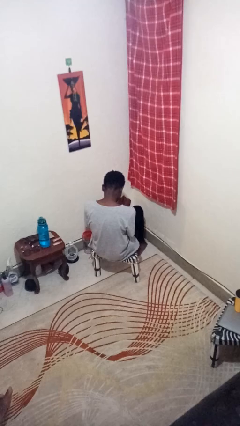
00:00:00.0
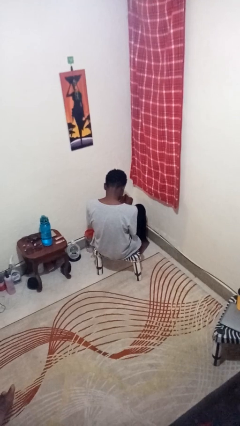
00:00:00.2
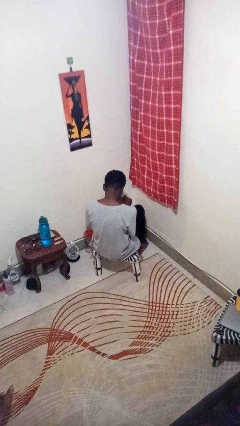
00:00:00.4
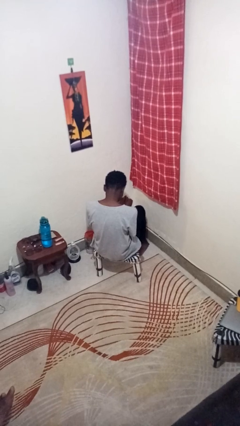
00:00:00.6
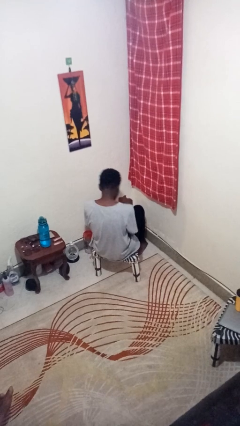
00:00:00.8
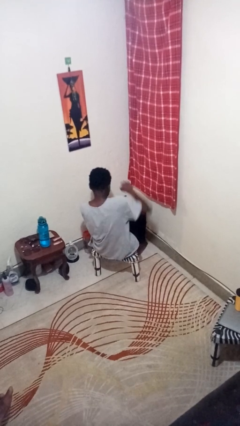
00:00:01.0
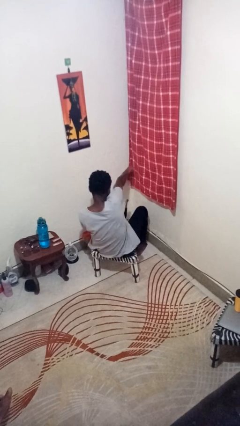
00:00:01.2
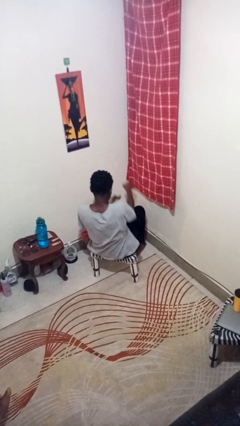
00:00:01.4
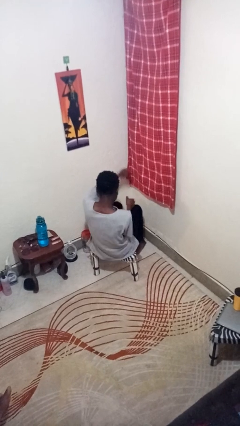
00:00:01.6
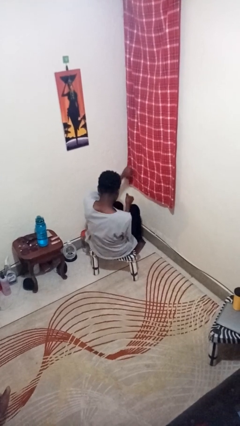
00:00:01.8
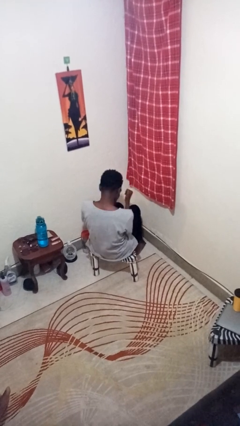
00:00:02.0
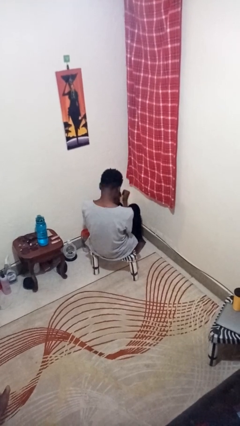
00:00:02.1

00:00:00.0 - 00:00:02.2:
person punches

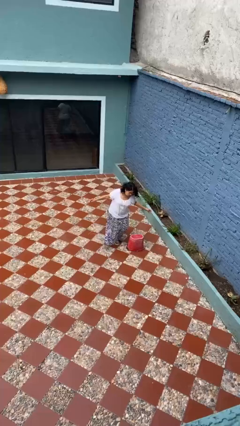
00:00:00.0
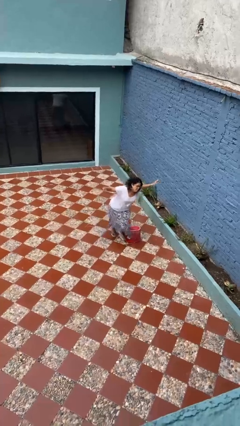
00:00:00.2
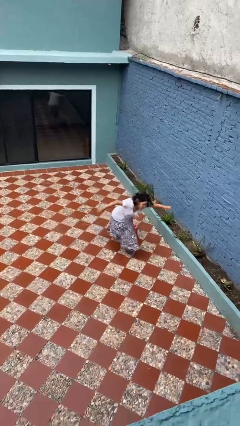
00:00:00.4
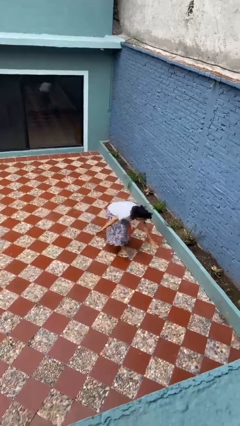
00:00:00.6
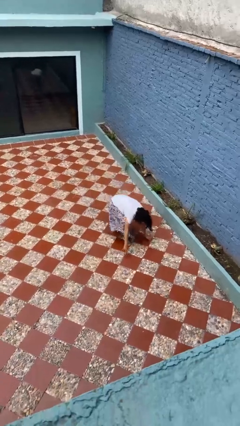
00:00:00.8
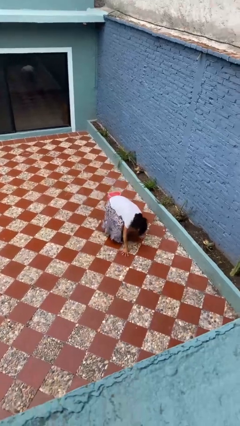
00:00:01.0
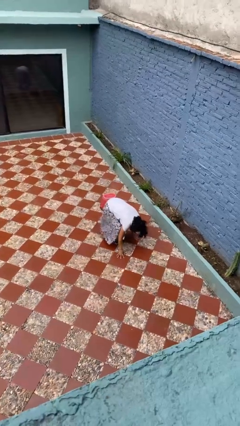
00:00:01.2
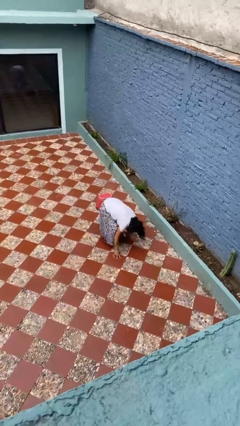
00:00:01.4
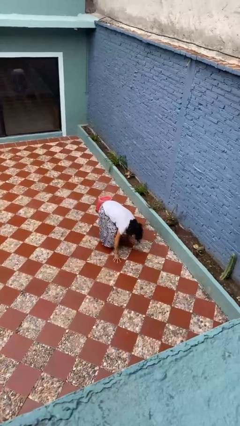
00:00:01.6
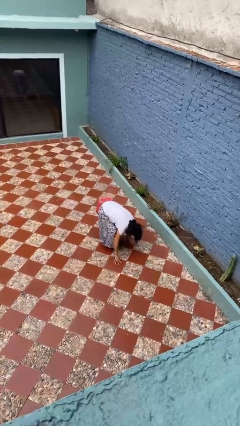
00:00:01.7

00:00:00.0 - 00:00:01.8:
person trips on object on floor

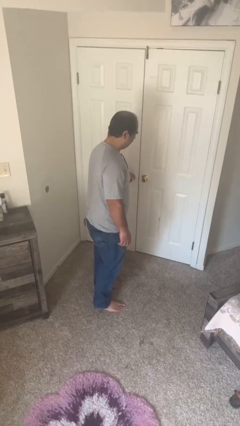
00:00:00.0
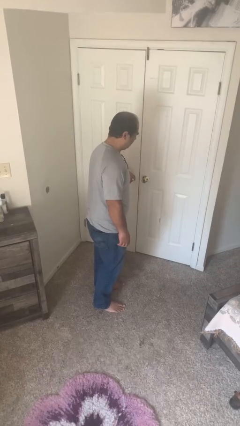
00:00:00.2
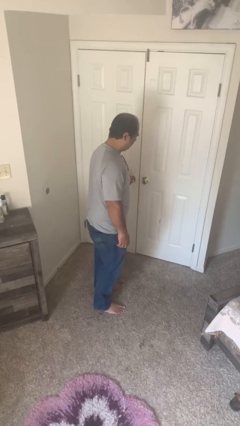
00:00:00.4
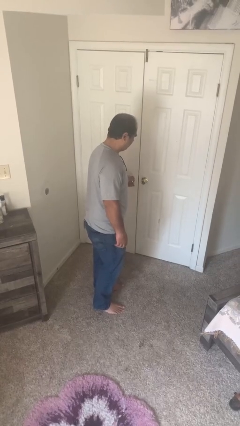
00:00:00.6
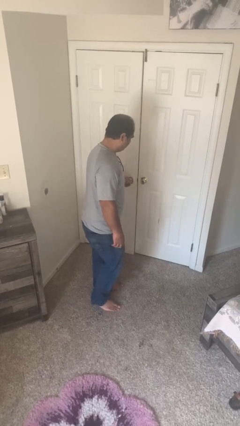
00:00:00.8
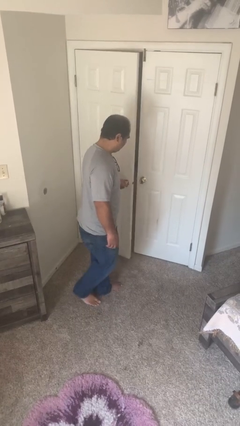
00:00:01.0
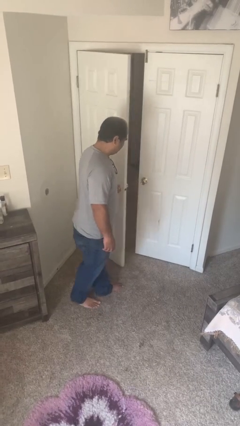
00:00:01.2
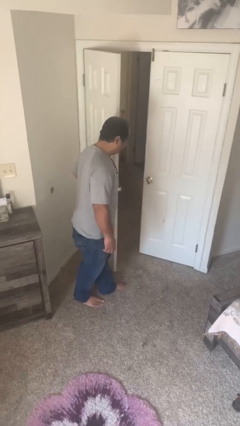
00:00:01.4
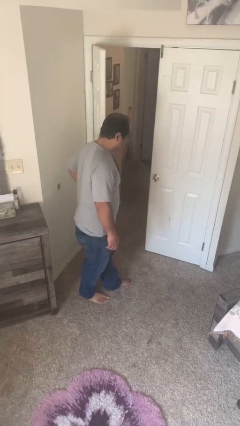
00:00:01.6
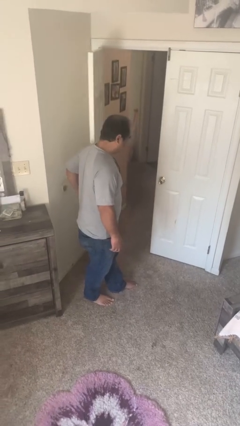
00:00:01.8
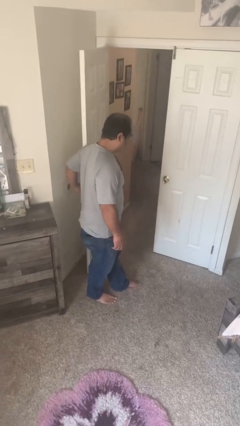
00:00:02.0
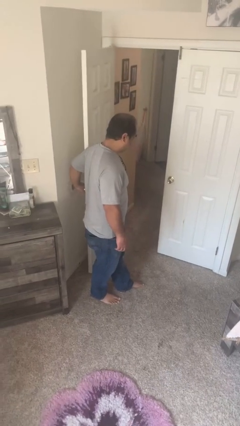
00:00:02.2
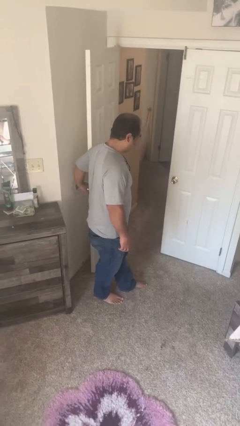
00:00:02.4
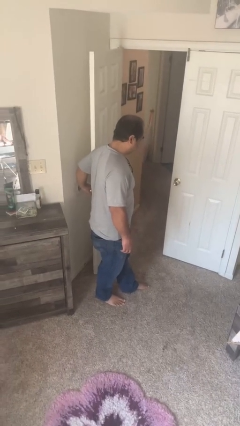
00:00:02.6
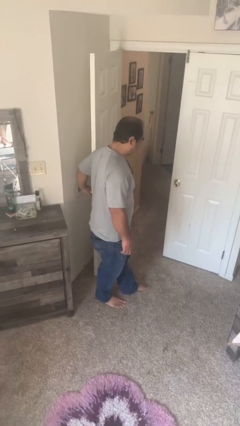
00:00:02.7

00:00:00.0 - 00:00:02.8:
person opens facility door

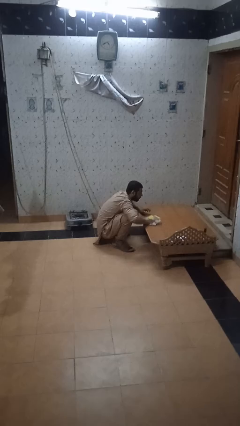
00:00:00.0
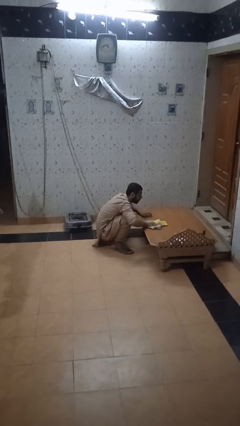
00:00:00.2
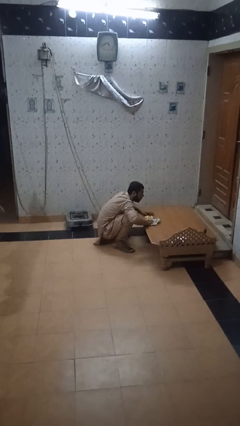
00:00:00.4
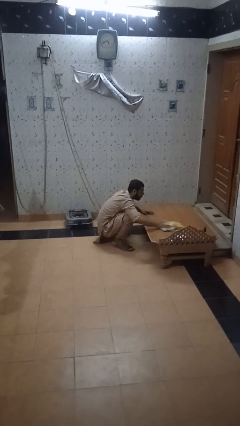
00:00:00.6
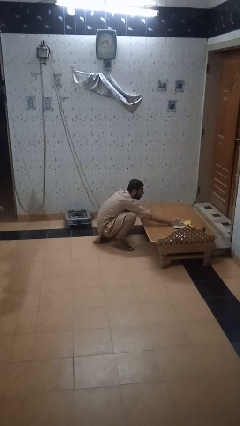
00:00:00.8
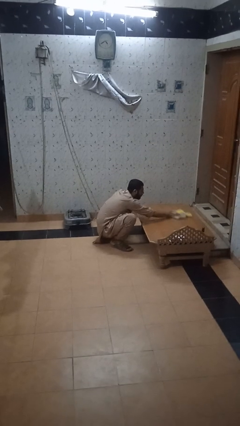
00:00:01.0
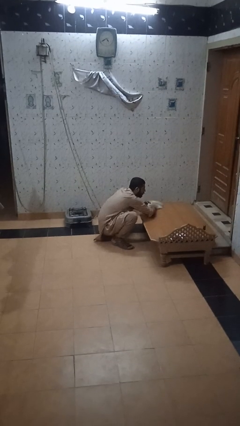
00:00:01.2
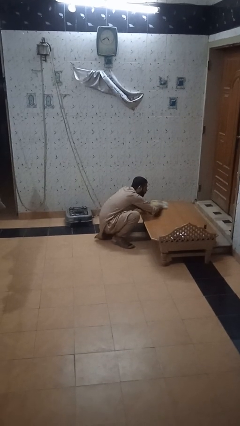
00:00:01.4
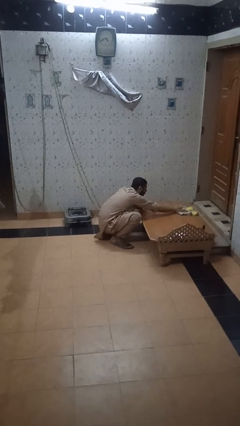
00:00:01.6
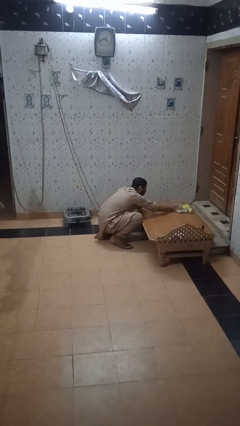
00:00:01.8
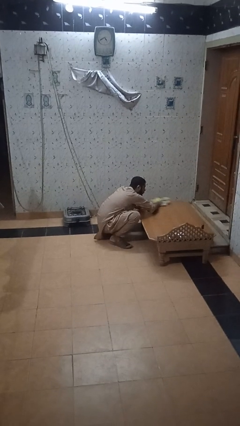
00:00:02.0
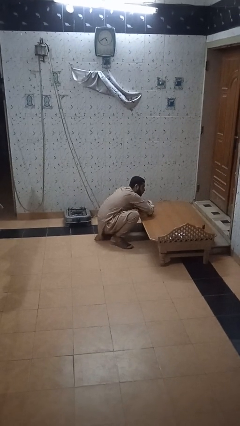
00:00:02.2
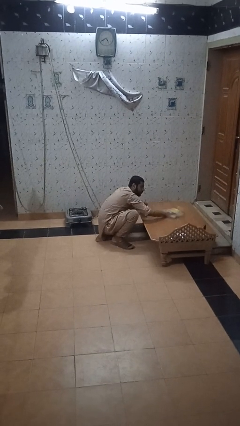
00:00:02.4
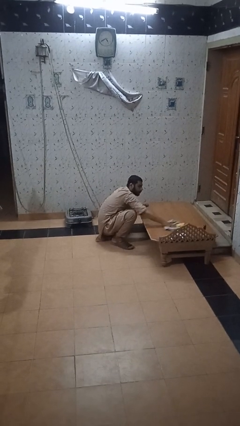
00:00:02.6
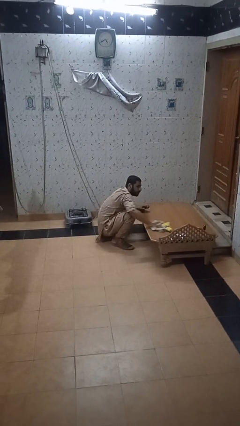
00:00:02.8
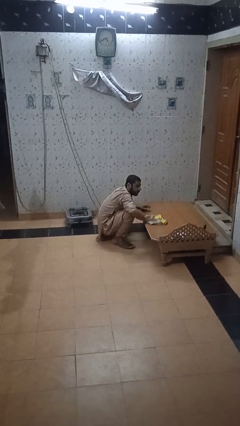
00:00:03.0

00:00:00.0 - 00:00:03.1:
person cleans table with rag

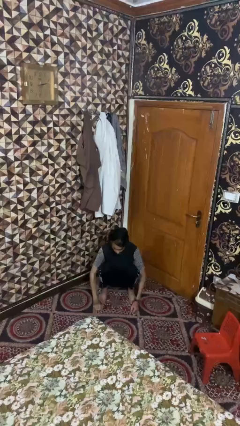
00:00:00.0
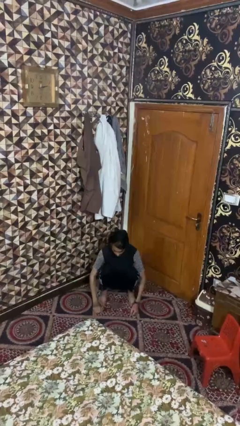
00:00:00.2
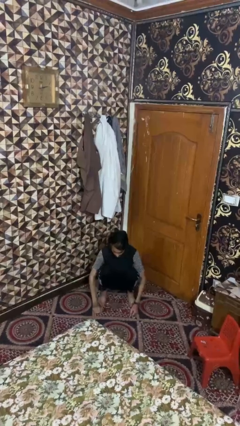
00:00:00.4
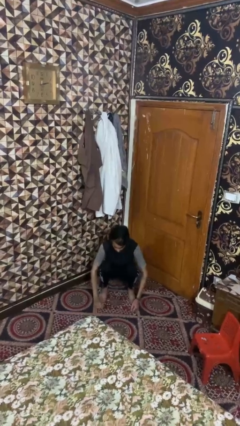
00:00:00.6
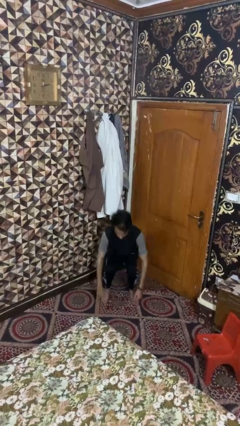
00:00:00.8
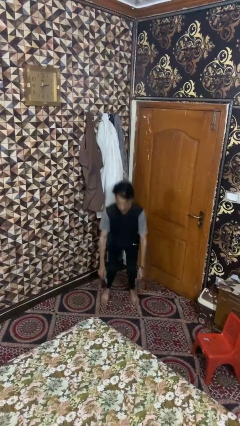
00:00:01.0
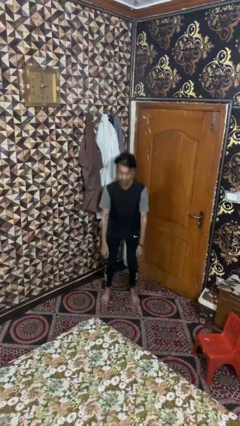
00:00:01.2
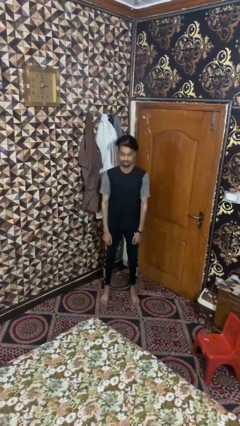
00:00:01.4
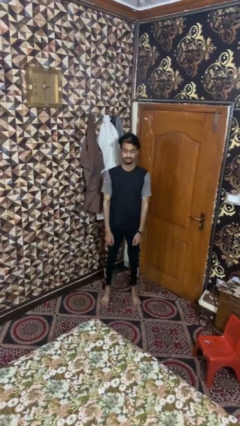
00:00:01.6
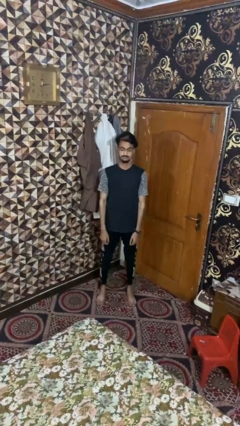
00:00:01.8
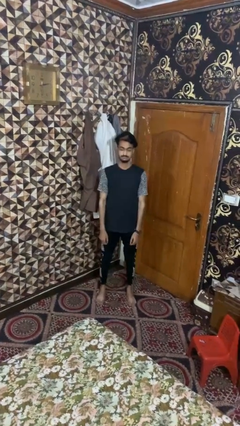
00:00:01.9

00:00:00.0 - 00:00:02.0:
person stands up

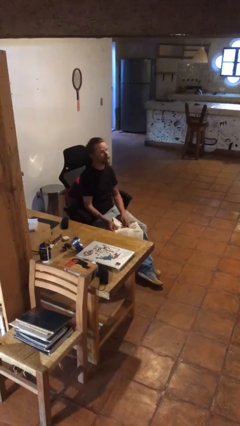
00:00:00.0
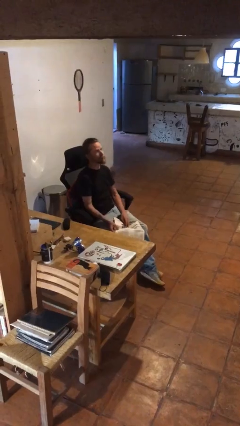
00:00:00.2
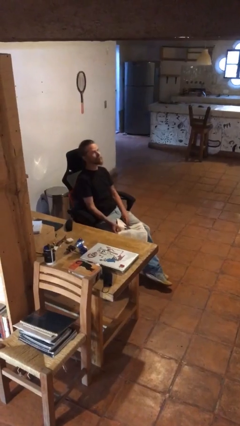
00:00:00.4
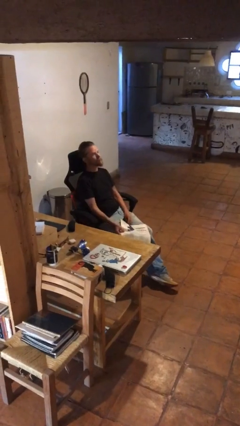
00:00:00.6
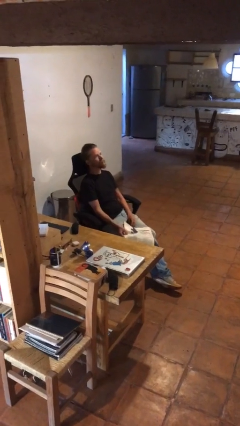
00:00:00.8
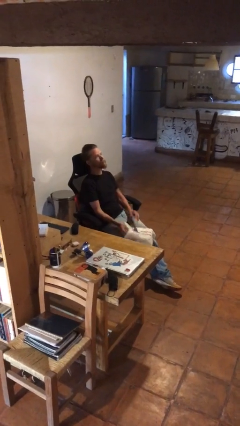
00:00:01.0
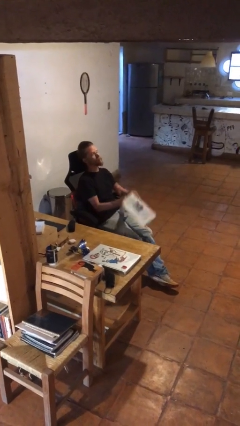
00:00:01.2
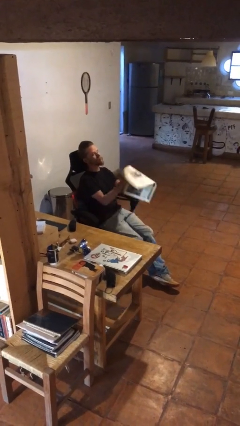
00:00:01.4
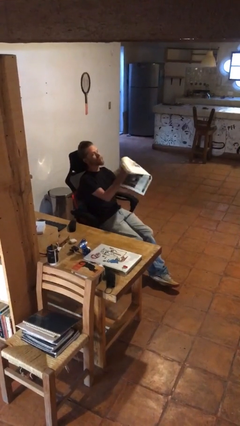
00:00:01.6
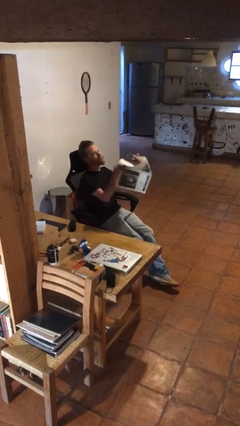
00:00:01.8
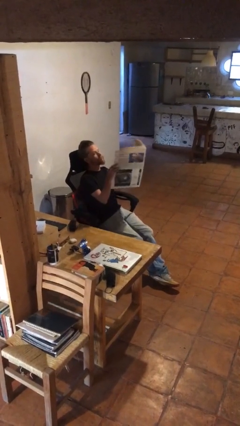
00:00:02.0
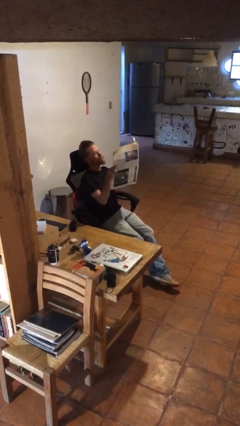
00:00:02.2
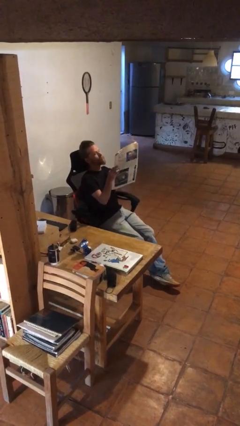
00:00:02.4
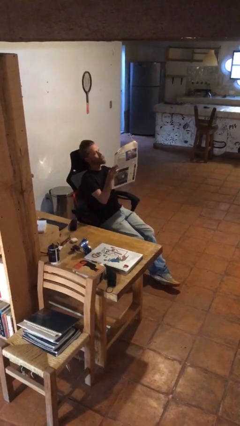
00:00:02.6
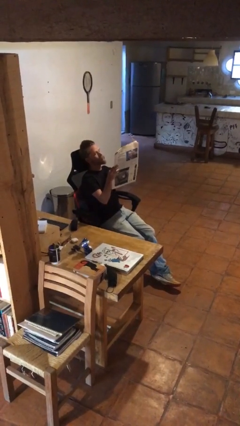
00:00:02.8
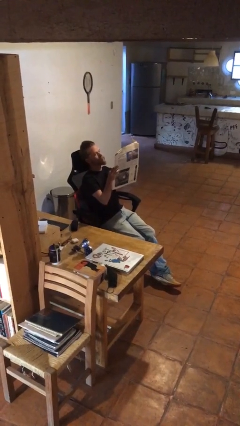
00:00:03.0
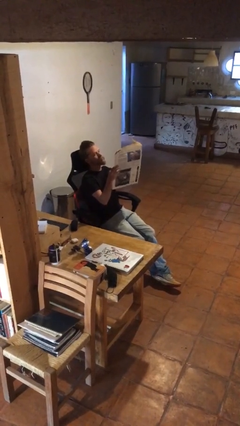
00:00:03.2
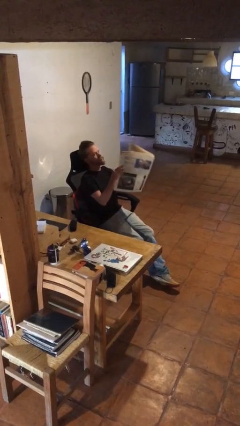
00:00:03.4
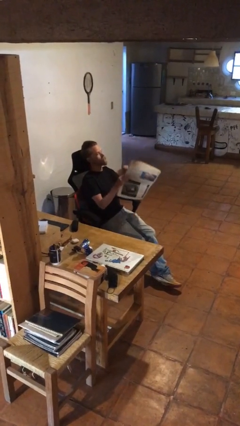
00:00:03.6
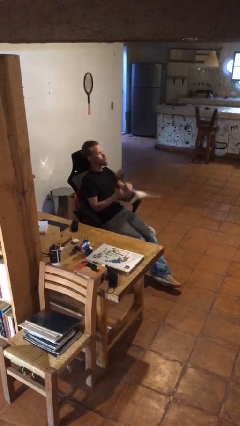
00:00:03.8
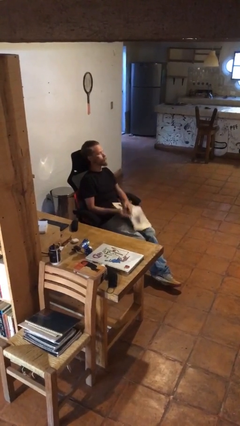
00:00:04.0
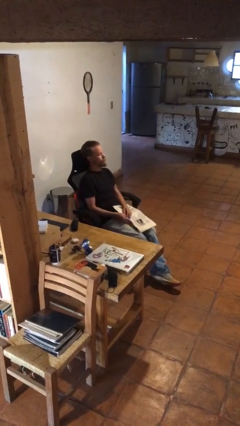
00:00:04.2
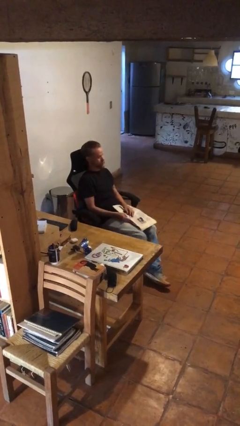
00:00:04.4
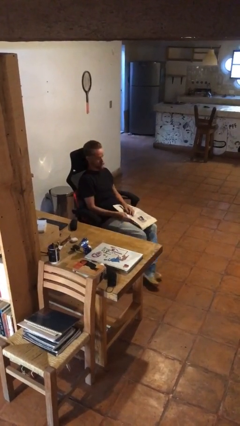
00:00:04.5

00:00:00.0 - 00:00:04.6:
person reads newspaper

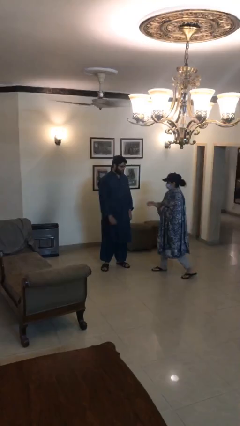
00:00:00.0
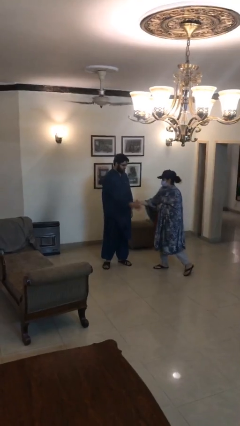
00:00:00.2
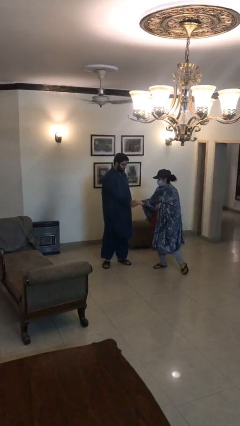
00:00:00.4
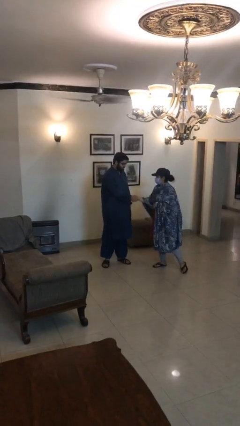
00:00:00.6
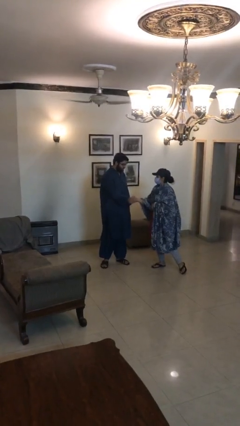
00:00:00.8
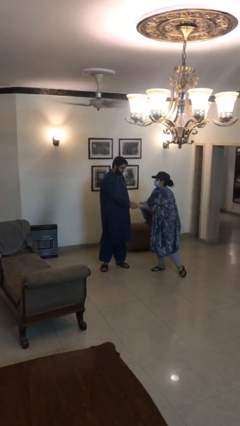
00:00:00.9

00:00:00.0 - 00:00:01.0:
person shakes hand
